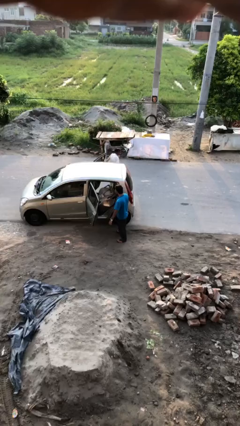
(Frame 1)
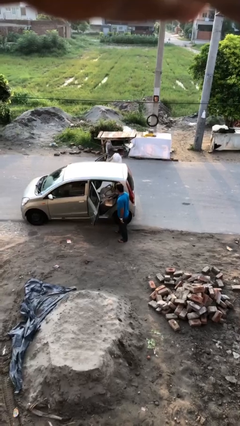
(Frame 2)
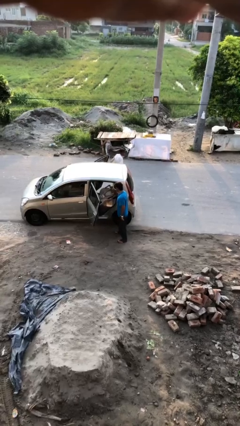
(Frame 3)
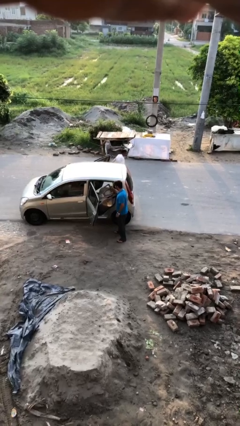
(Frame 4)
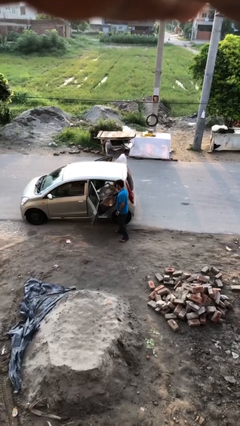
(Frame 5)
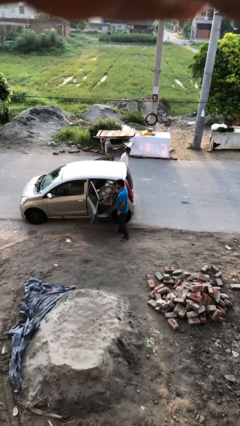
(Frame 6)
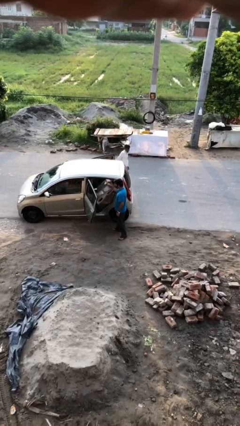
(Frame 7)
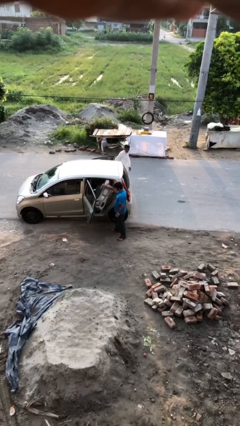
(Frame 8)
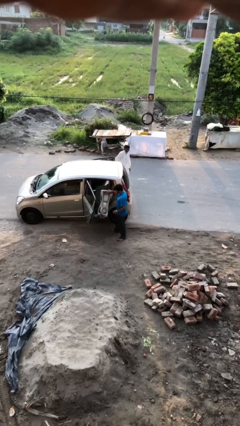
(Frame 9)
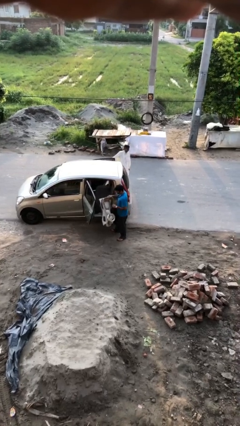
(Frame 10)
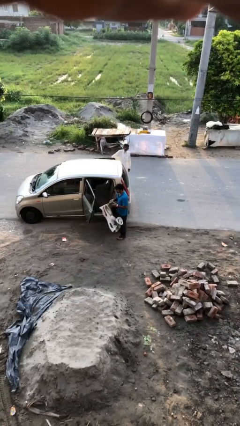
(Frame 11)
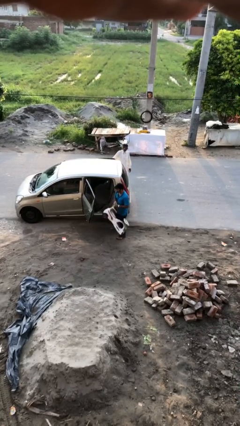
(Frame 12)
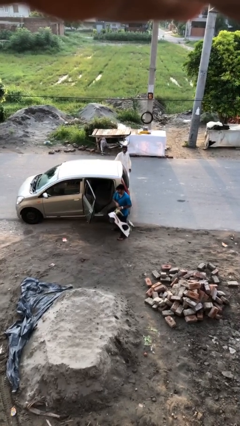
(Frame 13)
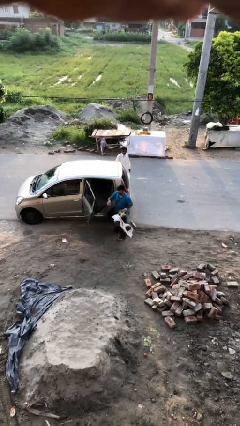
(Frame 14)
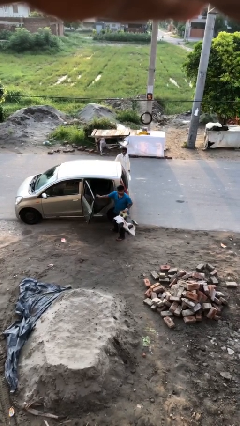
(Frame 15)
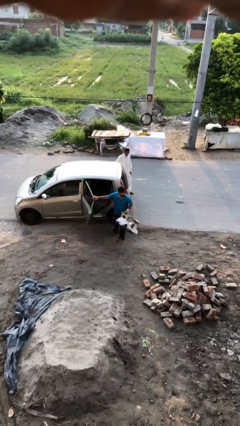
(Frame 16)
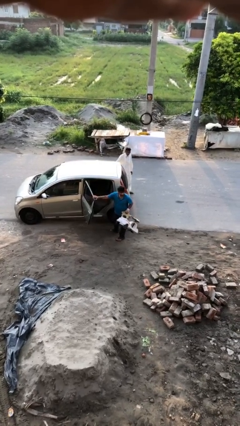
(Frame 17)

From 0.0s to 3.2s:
person unloads car

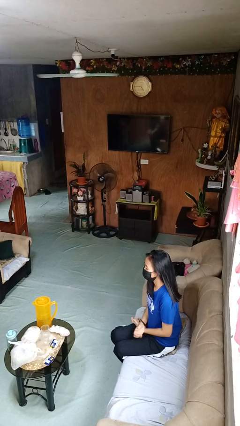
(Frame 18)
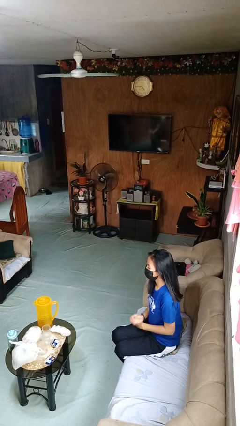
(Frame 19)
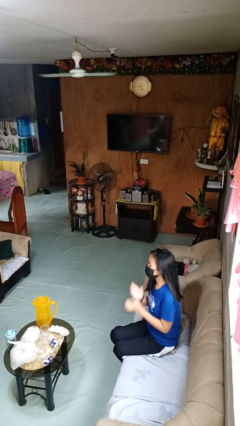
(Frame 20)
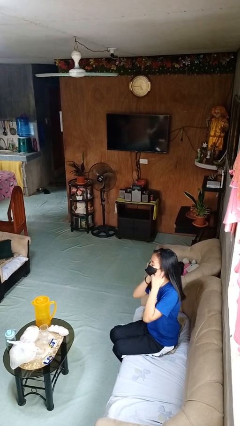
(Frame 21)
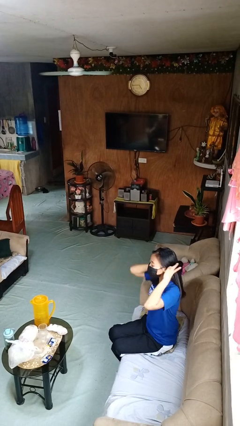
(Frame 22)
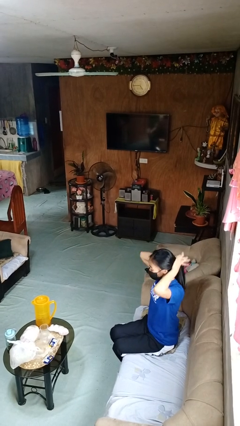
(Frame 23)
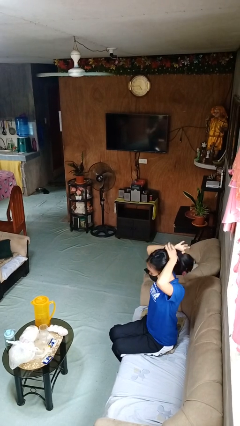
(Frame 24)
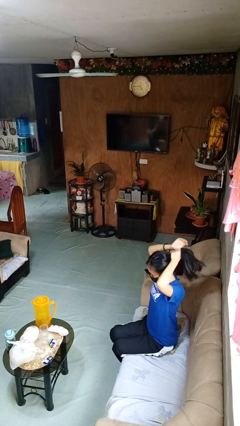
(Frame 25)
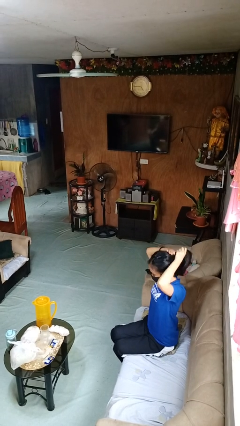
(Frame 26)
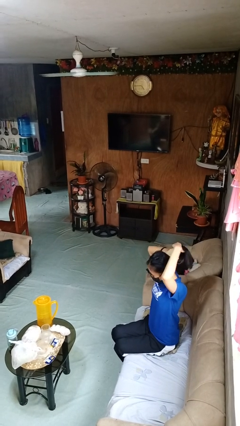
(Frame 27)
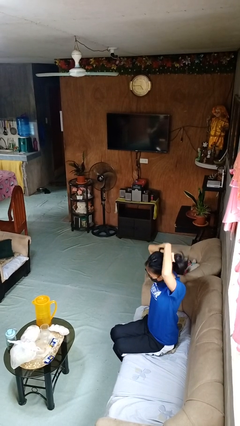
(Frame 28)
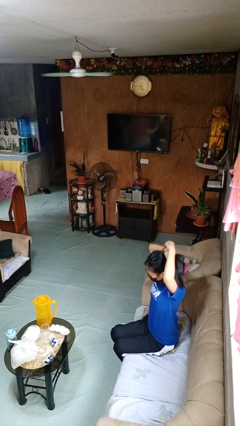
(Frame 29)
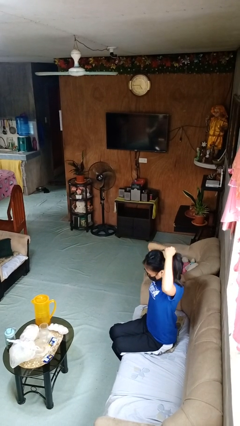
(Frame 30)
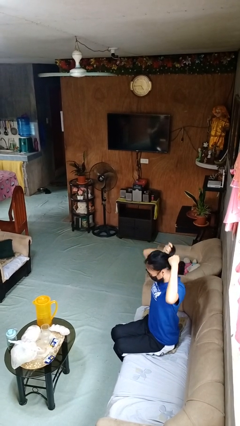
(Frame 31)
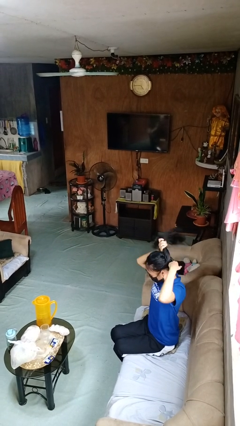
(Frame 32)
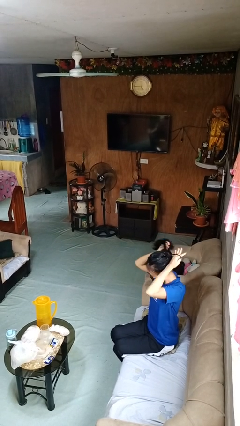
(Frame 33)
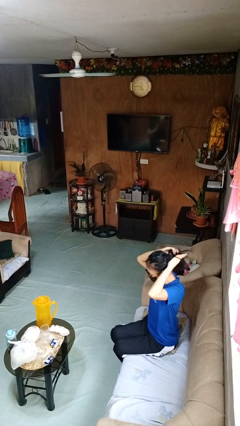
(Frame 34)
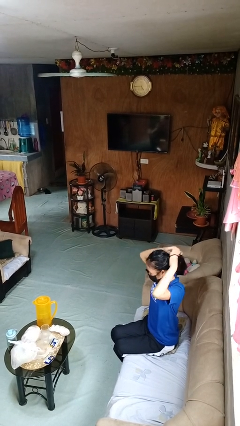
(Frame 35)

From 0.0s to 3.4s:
person puts hair in ponytail

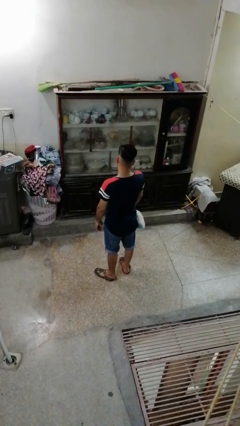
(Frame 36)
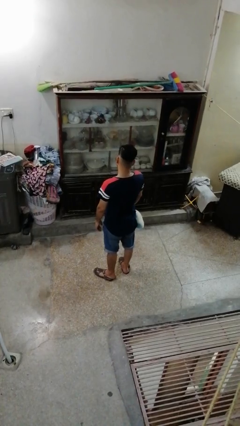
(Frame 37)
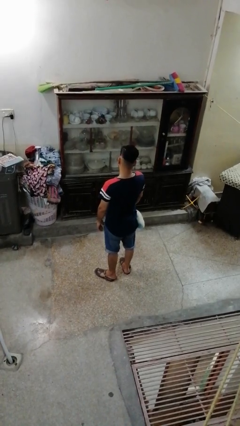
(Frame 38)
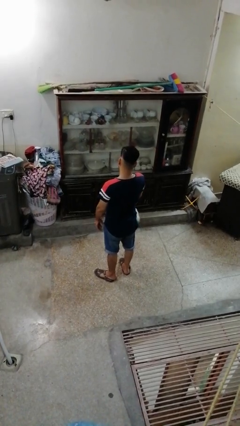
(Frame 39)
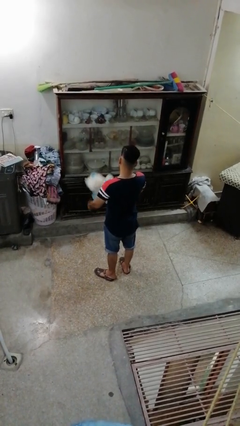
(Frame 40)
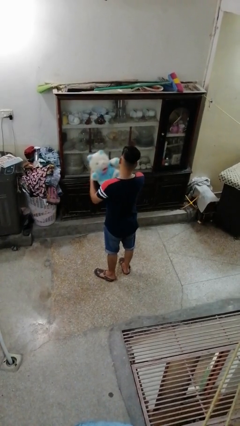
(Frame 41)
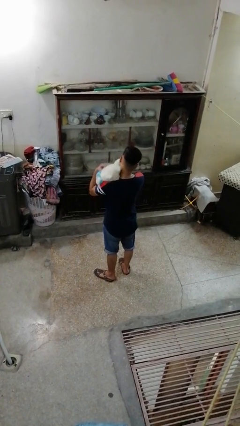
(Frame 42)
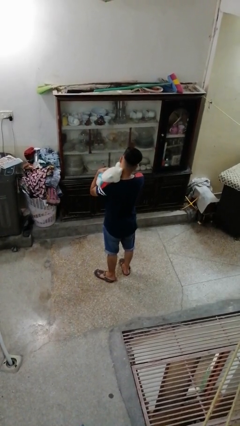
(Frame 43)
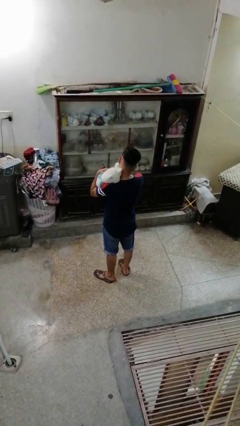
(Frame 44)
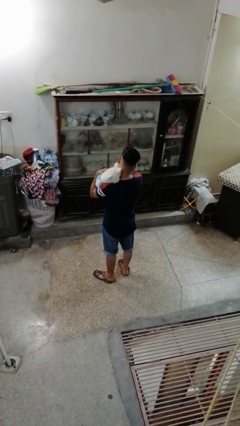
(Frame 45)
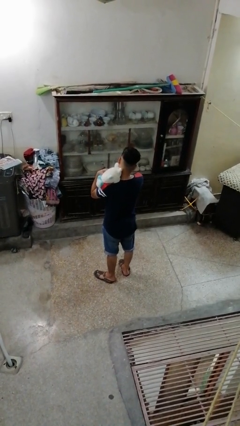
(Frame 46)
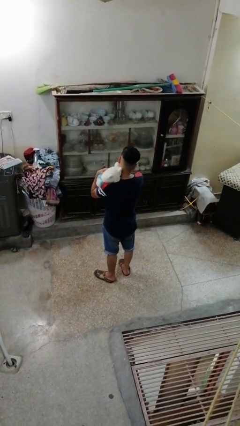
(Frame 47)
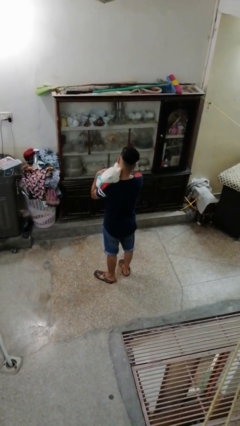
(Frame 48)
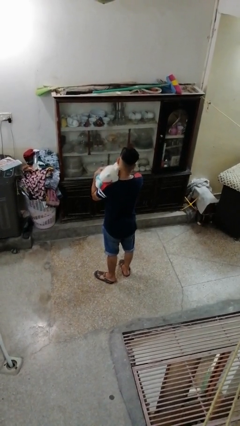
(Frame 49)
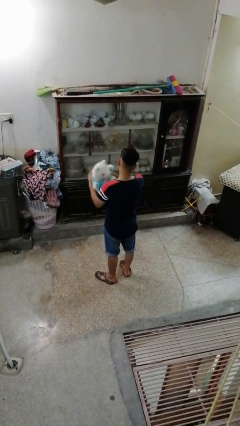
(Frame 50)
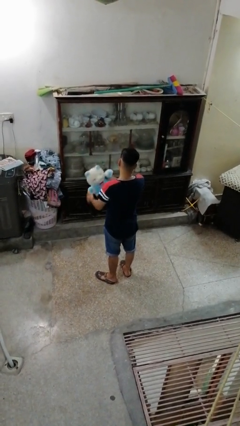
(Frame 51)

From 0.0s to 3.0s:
person hugs stuffed animal

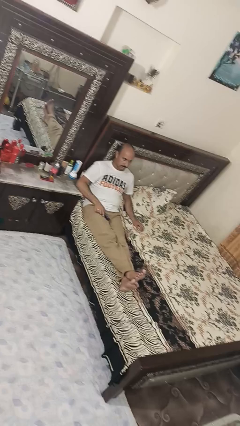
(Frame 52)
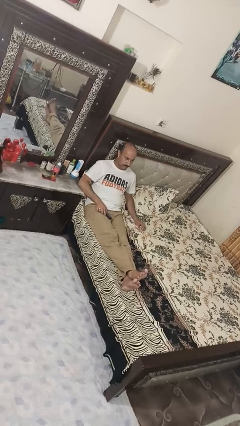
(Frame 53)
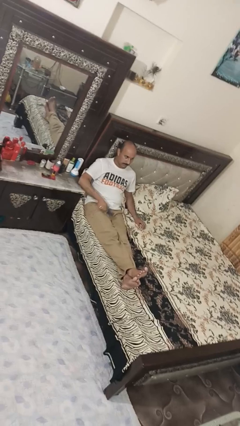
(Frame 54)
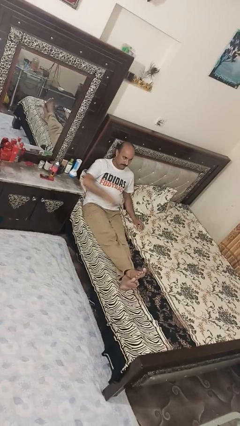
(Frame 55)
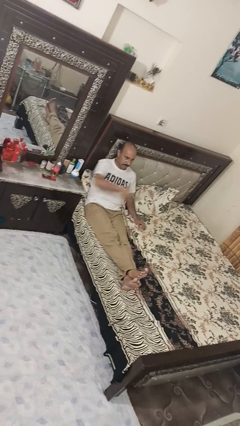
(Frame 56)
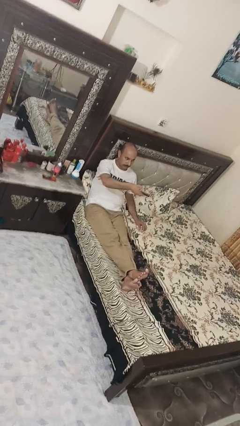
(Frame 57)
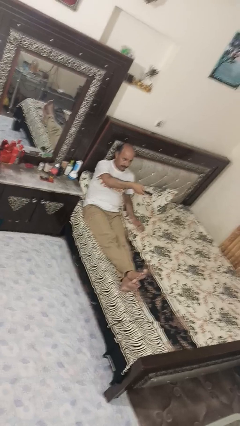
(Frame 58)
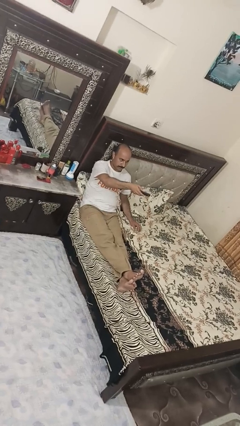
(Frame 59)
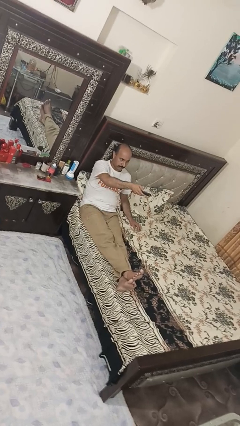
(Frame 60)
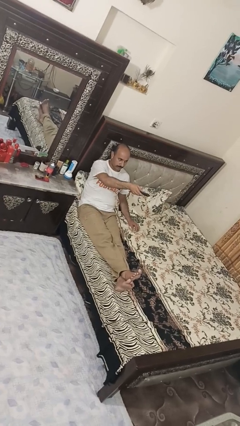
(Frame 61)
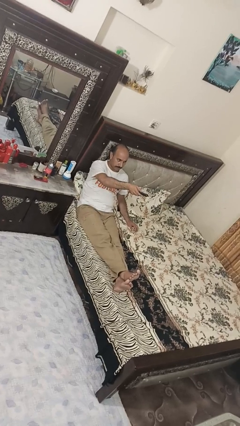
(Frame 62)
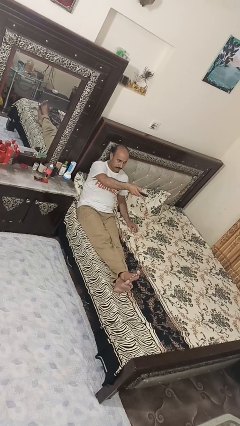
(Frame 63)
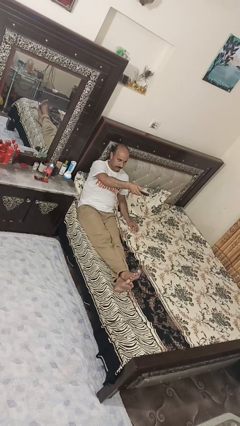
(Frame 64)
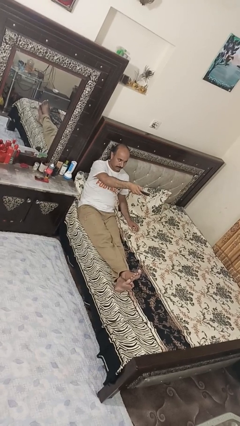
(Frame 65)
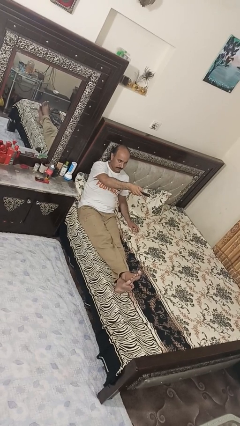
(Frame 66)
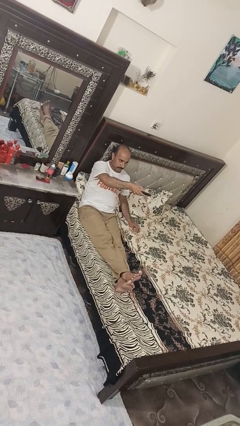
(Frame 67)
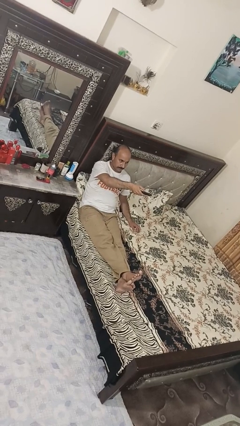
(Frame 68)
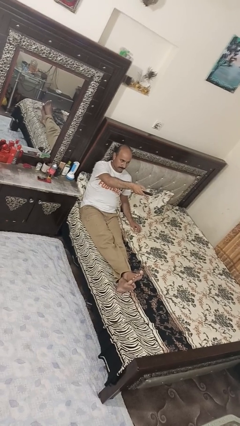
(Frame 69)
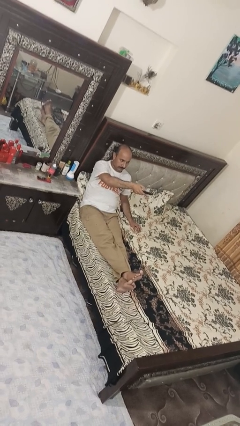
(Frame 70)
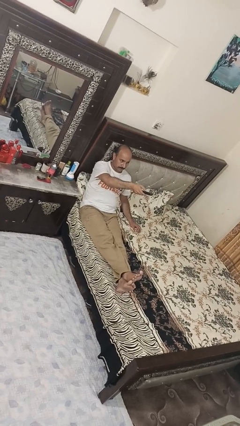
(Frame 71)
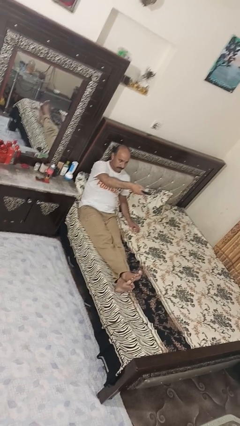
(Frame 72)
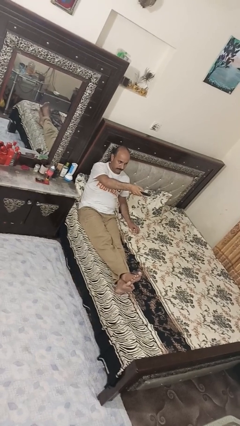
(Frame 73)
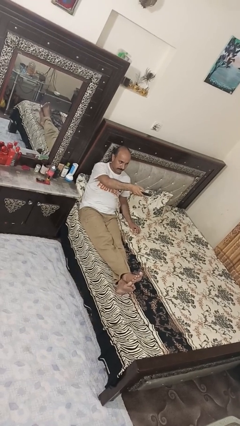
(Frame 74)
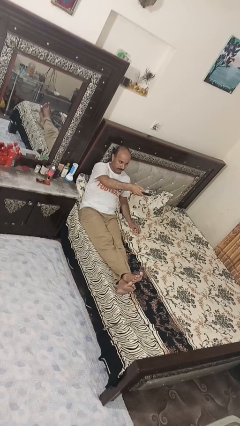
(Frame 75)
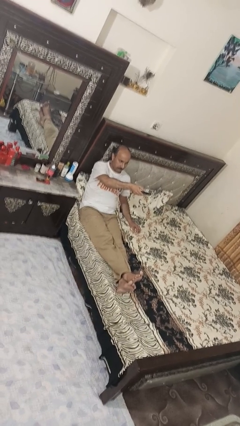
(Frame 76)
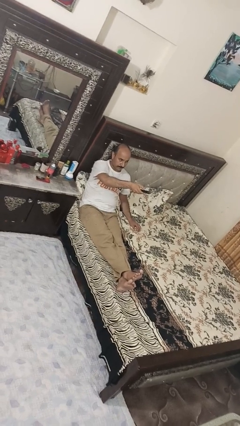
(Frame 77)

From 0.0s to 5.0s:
person uses television remote

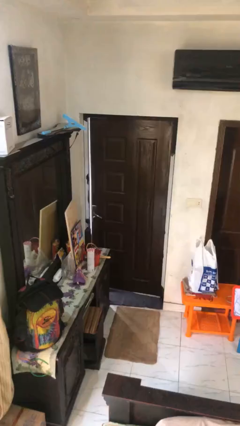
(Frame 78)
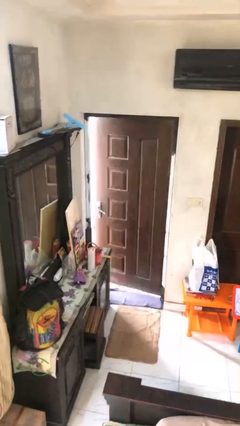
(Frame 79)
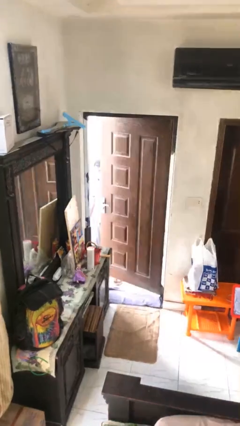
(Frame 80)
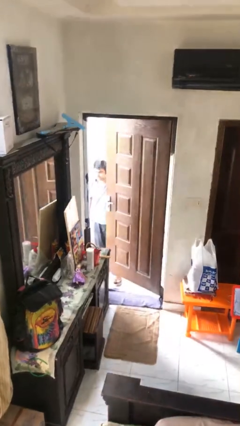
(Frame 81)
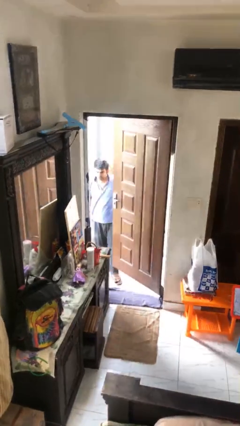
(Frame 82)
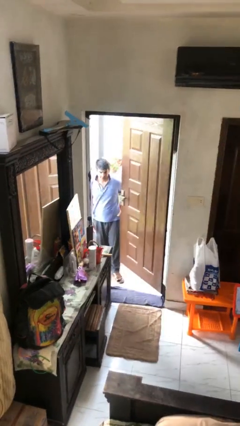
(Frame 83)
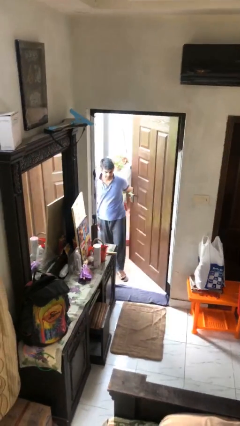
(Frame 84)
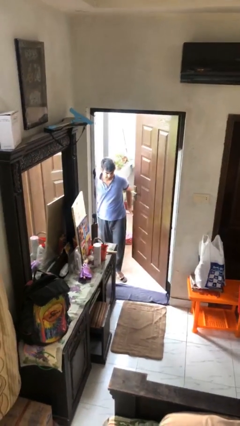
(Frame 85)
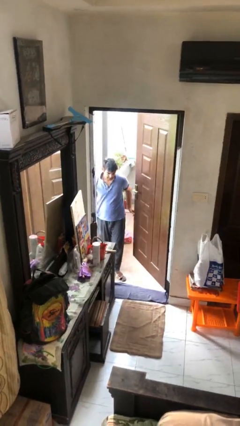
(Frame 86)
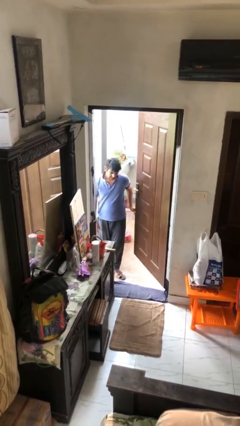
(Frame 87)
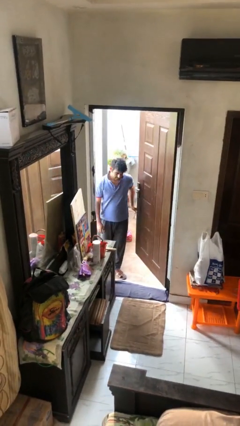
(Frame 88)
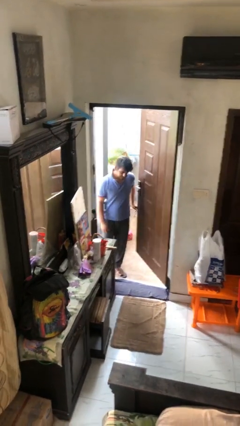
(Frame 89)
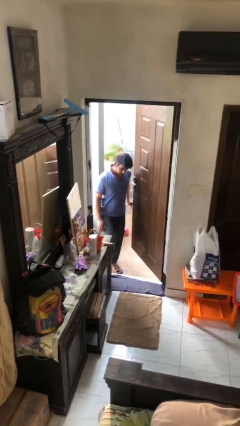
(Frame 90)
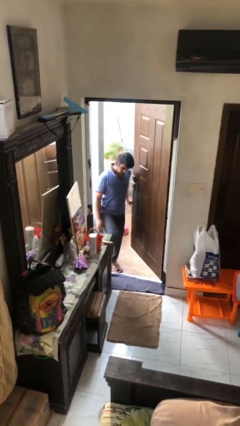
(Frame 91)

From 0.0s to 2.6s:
person opens facility door

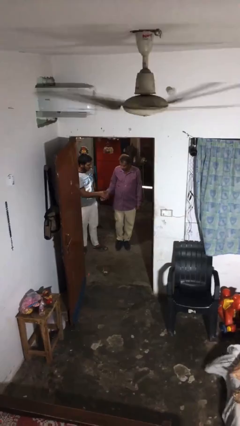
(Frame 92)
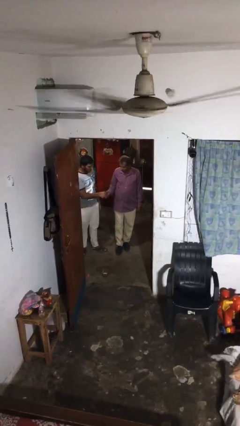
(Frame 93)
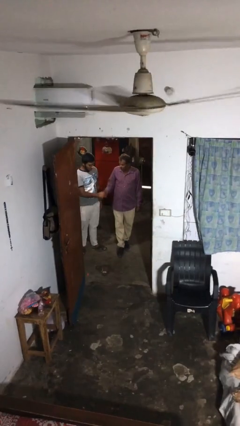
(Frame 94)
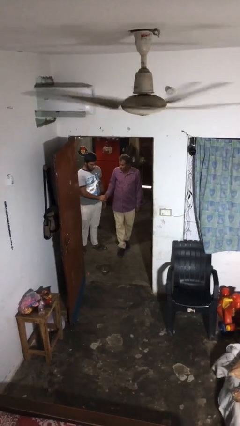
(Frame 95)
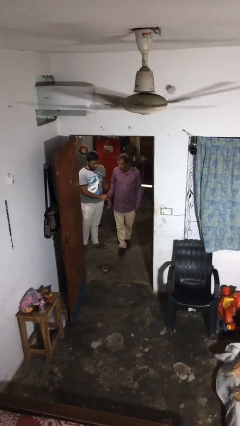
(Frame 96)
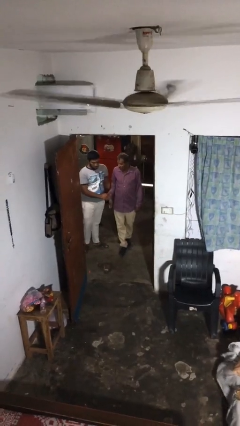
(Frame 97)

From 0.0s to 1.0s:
person shakes hand
